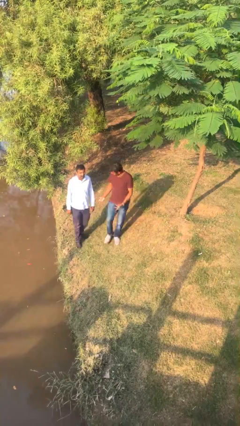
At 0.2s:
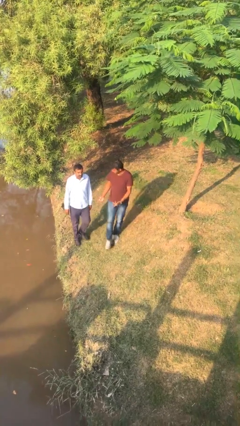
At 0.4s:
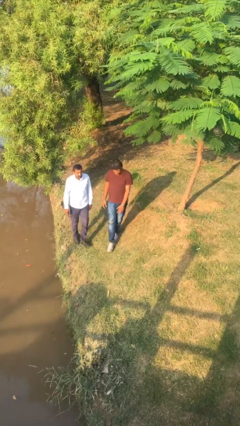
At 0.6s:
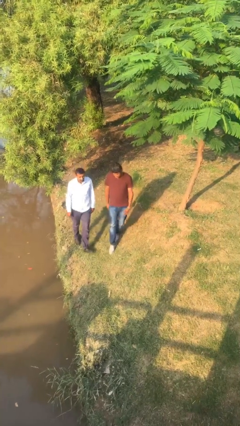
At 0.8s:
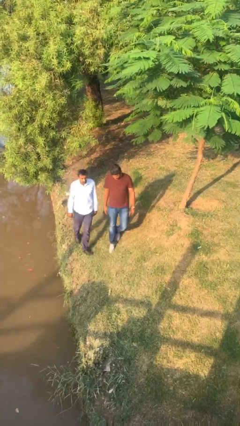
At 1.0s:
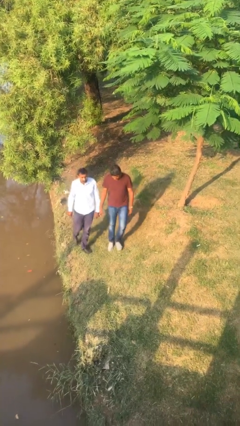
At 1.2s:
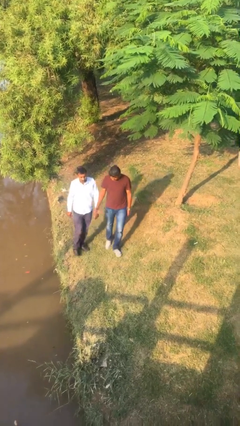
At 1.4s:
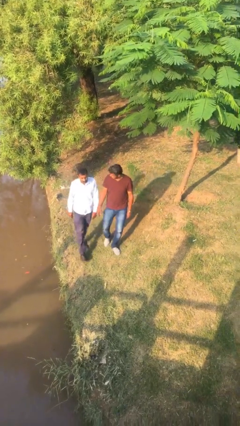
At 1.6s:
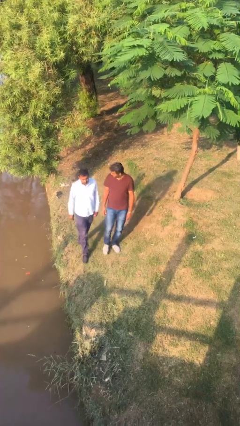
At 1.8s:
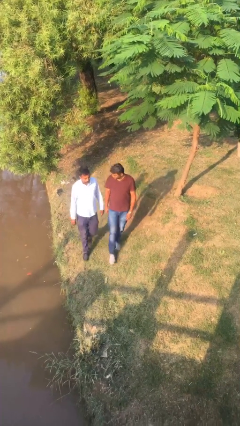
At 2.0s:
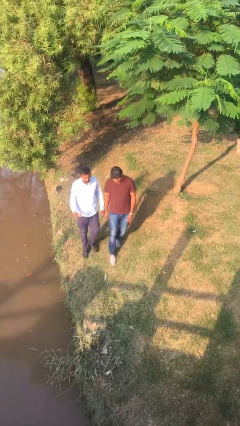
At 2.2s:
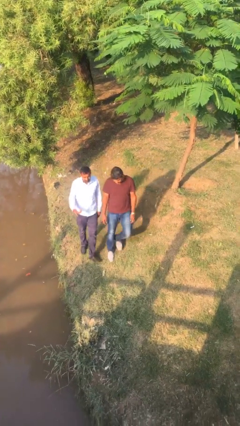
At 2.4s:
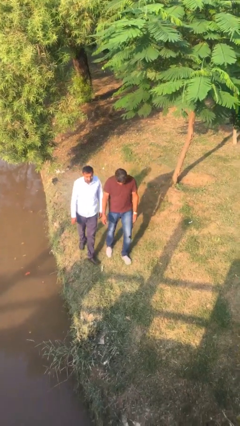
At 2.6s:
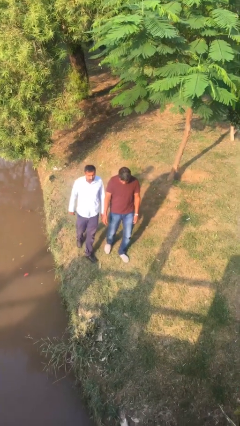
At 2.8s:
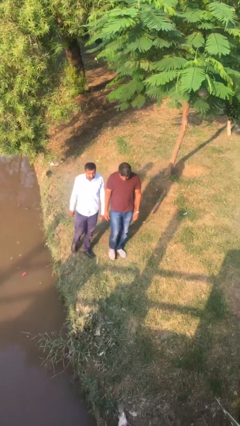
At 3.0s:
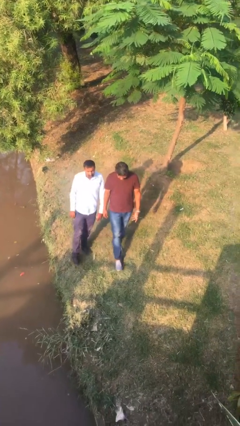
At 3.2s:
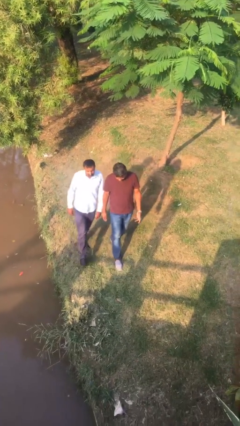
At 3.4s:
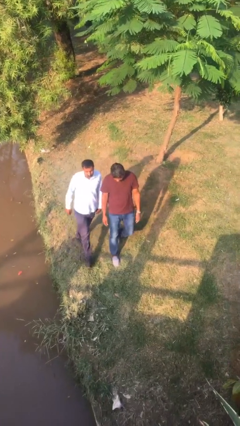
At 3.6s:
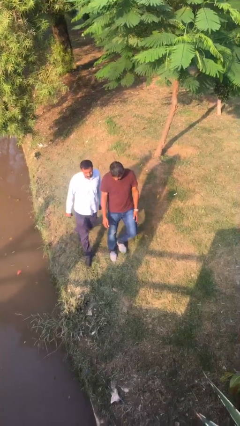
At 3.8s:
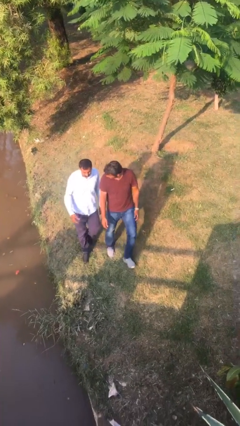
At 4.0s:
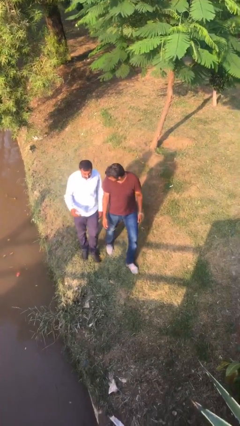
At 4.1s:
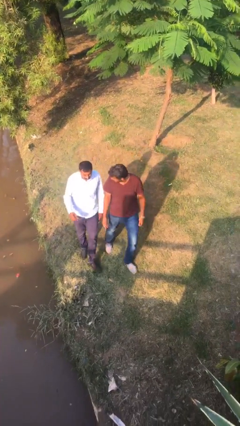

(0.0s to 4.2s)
person talks to person

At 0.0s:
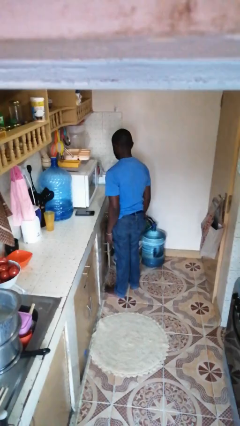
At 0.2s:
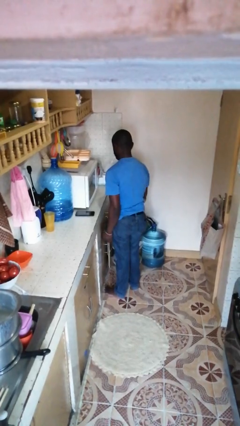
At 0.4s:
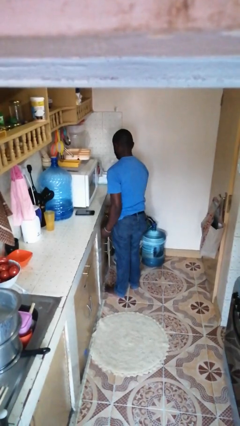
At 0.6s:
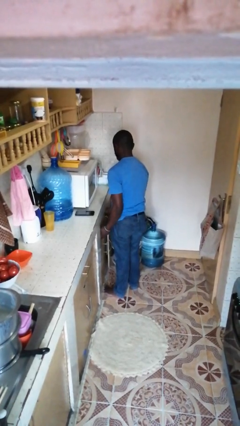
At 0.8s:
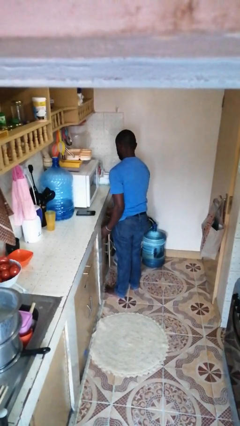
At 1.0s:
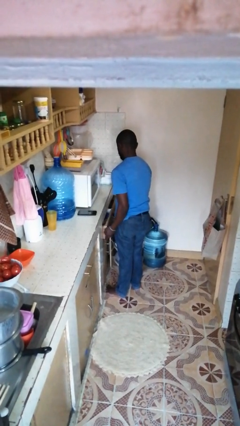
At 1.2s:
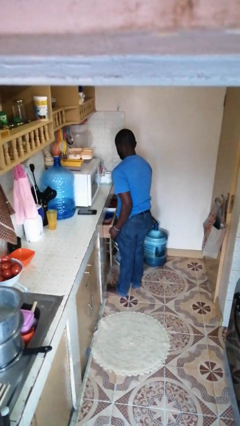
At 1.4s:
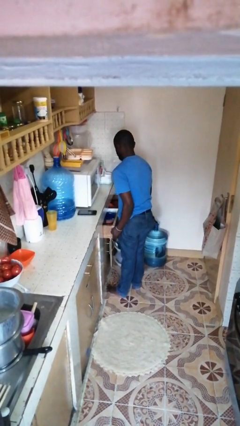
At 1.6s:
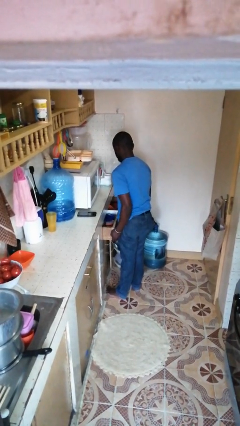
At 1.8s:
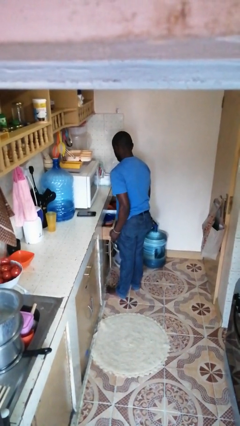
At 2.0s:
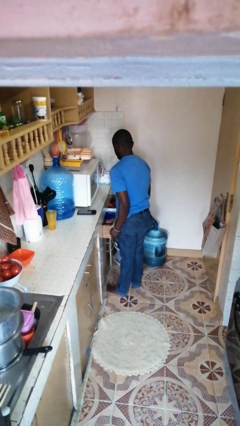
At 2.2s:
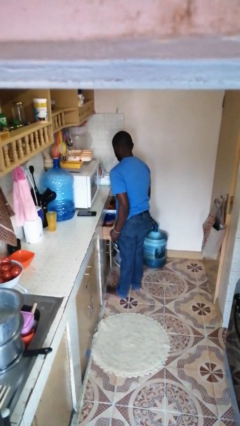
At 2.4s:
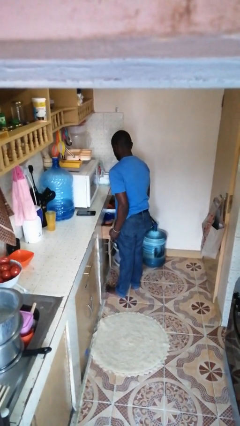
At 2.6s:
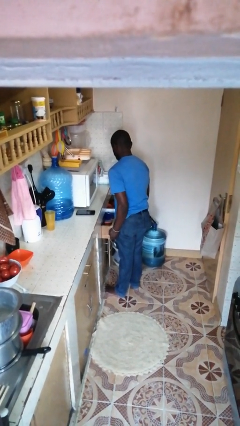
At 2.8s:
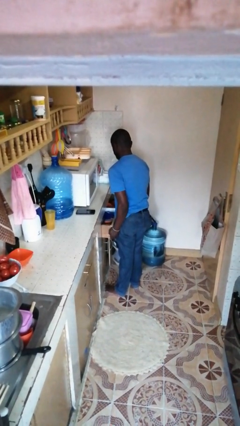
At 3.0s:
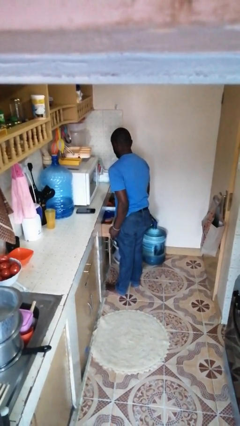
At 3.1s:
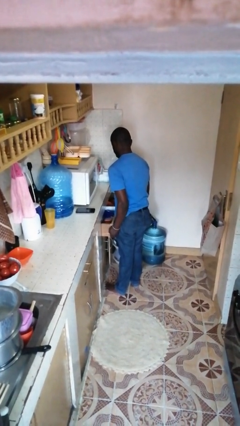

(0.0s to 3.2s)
person opens kitchen drawer

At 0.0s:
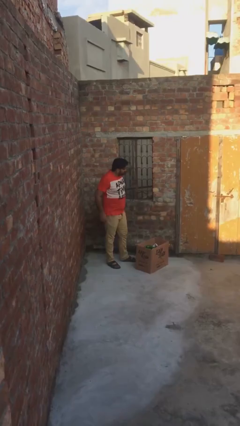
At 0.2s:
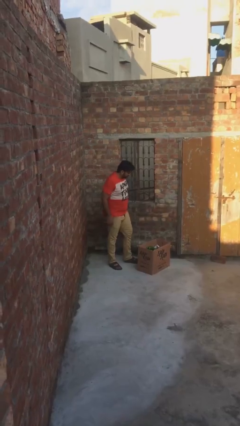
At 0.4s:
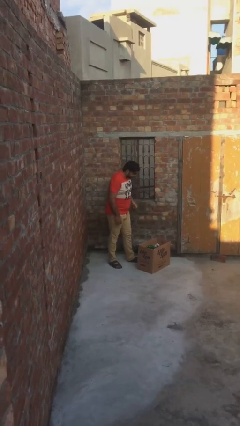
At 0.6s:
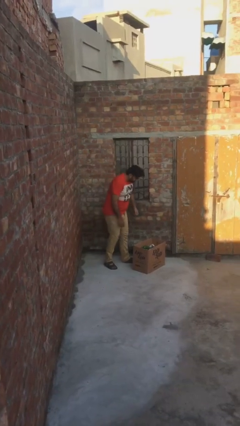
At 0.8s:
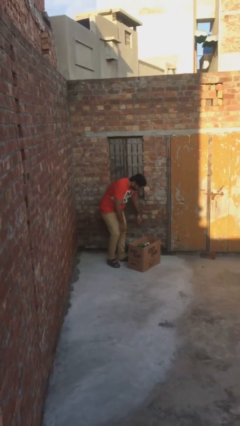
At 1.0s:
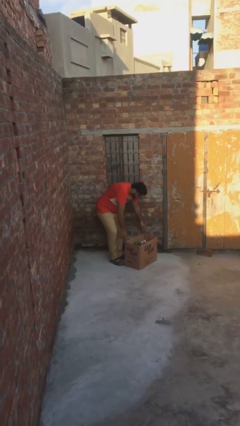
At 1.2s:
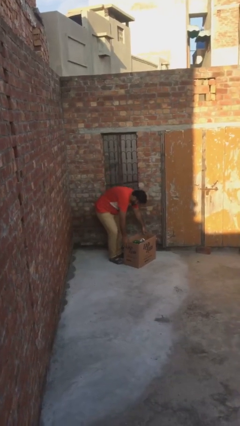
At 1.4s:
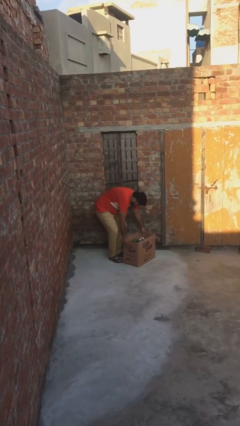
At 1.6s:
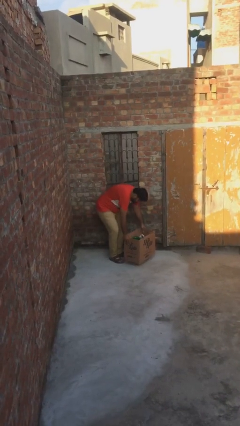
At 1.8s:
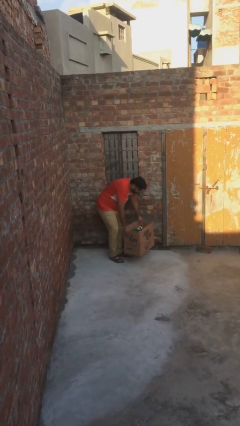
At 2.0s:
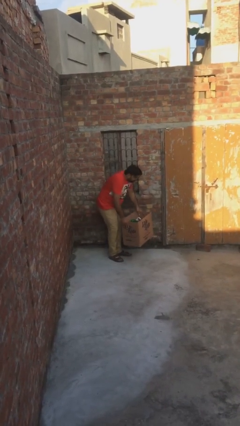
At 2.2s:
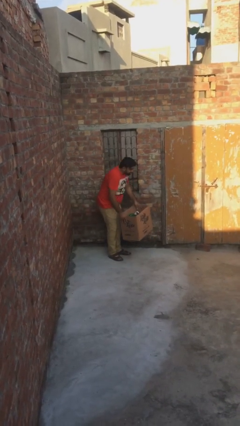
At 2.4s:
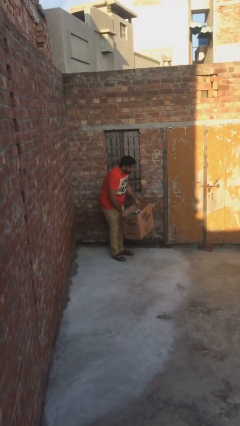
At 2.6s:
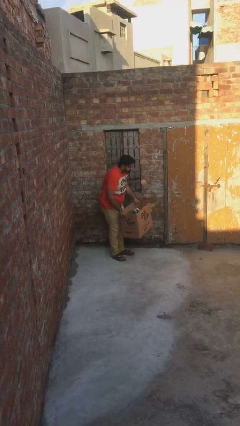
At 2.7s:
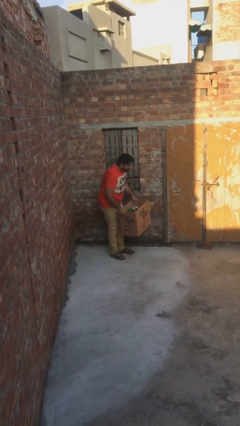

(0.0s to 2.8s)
person picks up object from floor

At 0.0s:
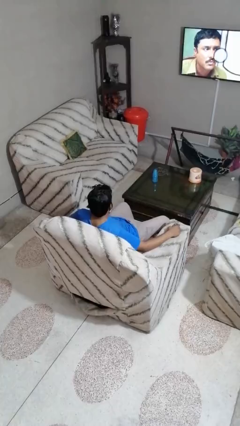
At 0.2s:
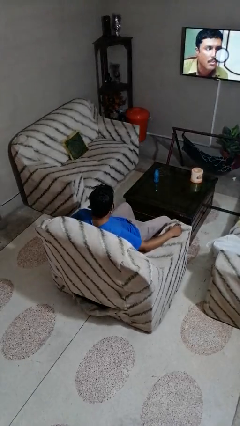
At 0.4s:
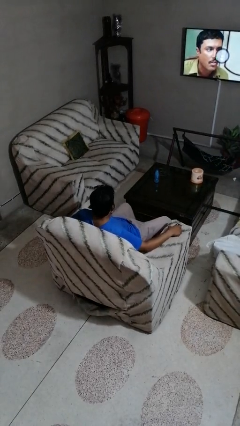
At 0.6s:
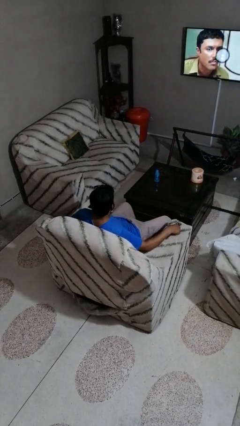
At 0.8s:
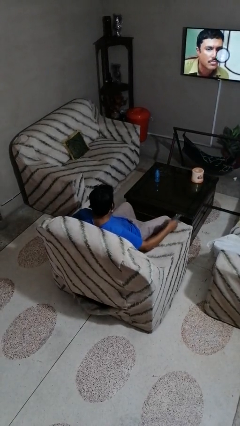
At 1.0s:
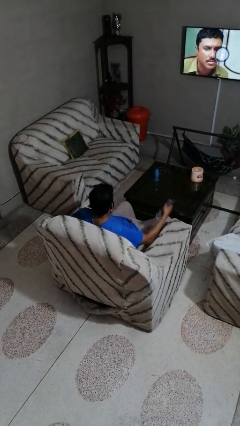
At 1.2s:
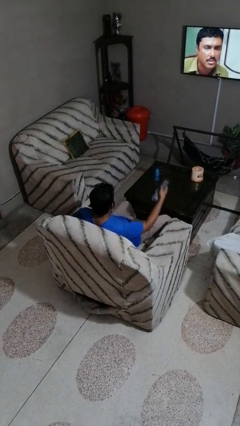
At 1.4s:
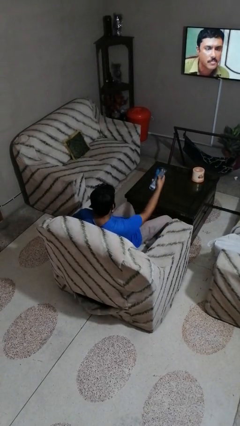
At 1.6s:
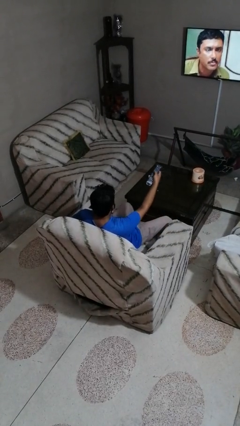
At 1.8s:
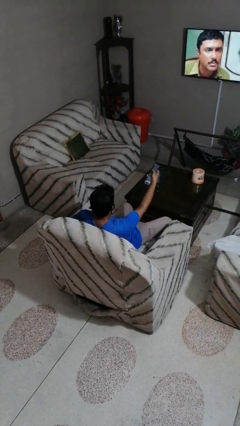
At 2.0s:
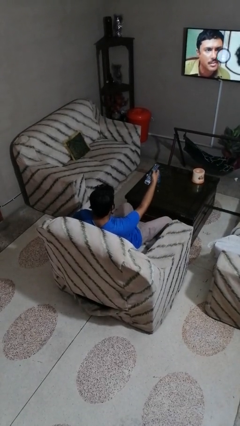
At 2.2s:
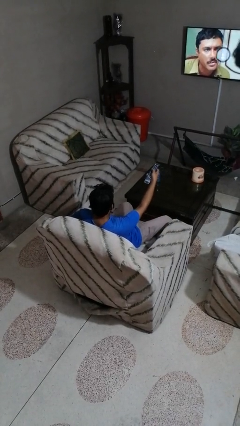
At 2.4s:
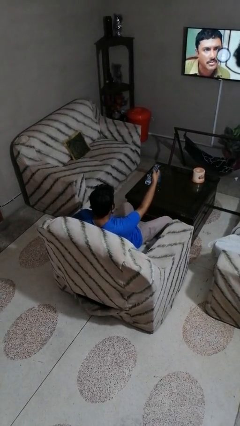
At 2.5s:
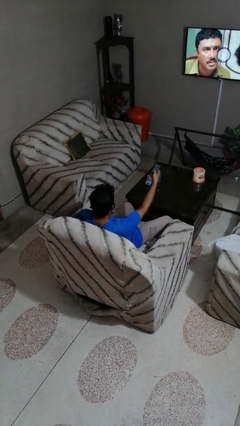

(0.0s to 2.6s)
person uses television remote

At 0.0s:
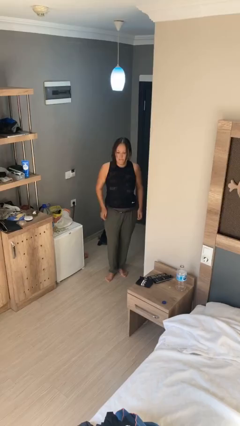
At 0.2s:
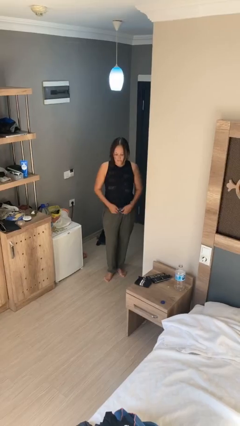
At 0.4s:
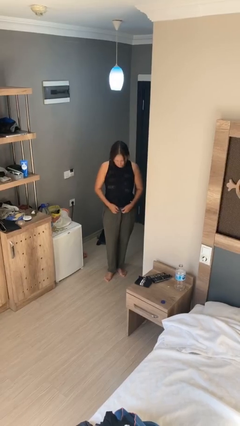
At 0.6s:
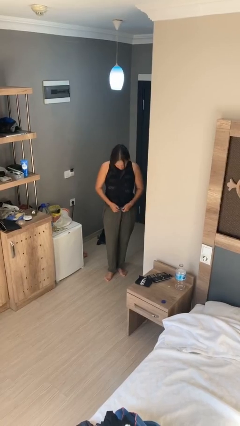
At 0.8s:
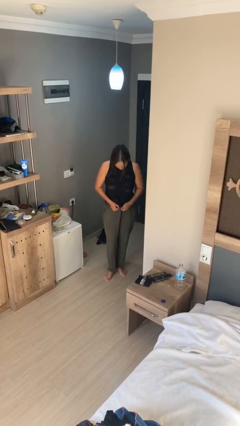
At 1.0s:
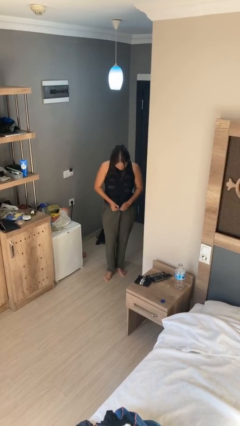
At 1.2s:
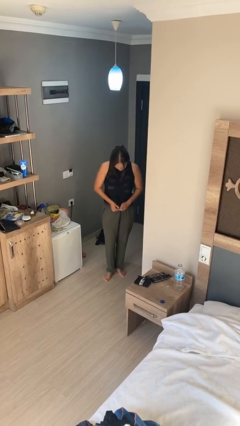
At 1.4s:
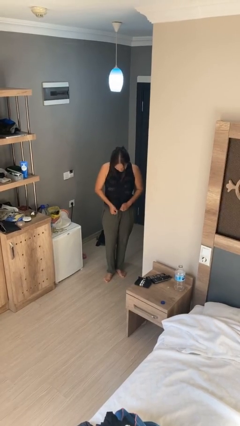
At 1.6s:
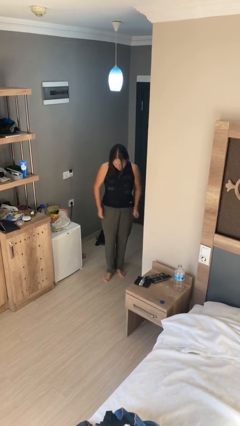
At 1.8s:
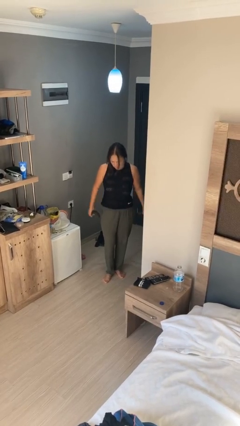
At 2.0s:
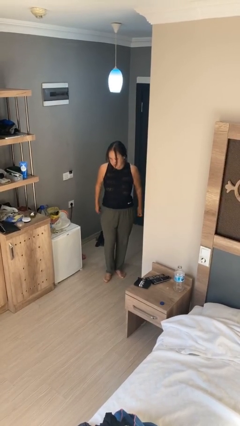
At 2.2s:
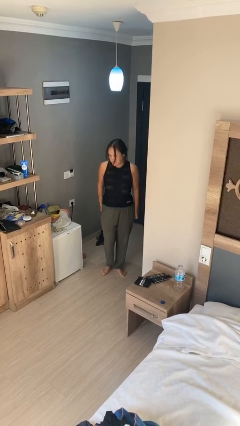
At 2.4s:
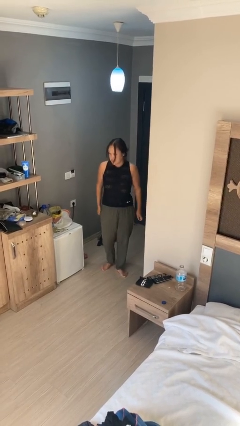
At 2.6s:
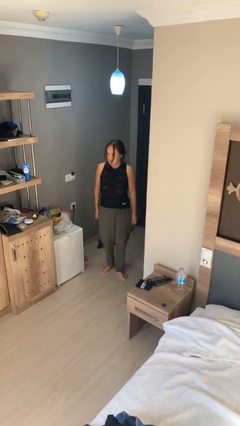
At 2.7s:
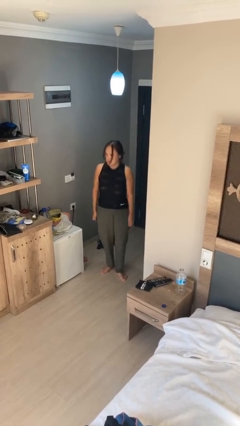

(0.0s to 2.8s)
person takes off belt

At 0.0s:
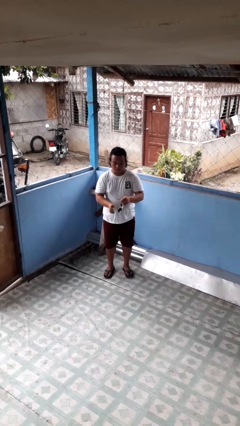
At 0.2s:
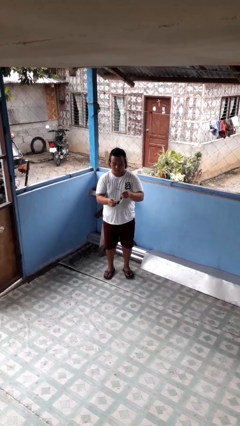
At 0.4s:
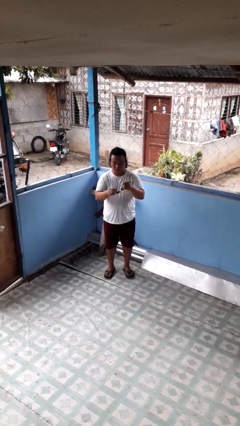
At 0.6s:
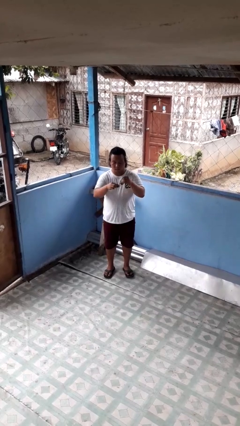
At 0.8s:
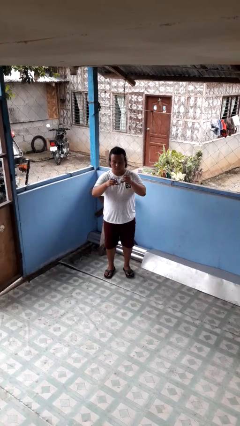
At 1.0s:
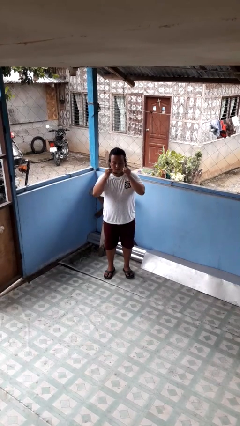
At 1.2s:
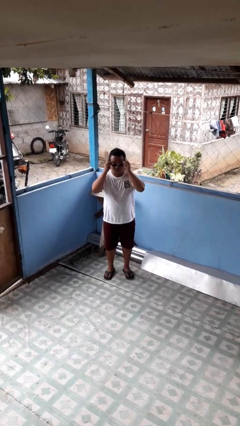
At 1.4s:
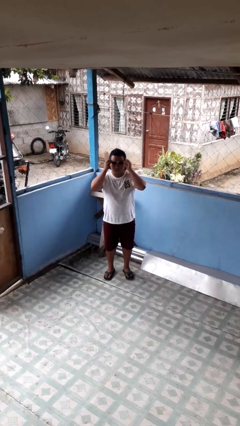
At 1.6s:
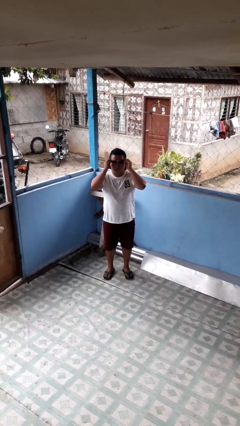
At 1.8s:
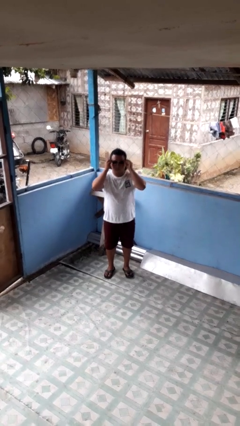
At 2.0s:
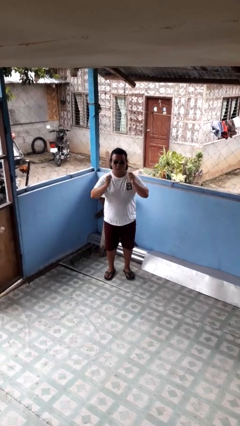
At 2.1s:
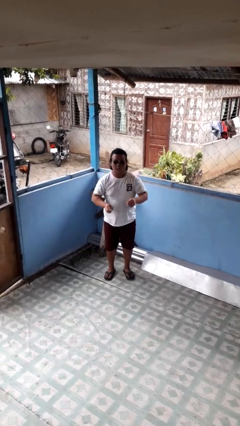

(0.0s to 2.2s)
person puts on sunglasses
